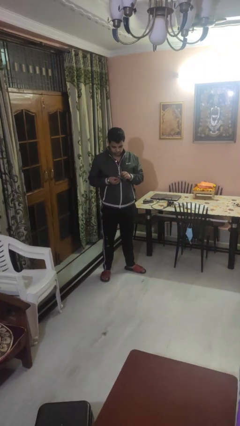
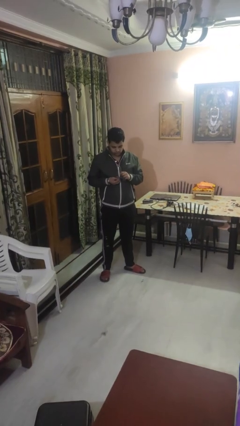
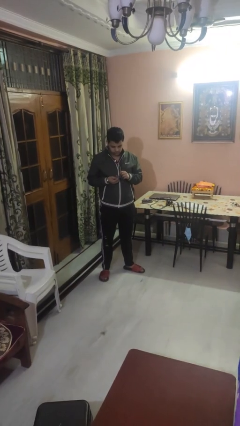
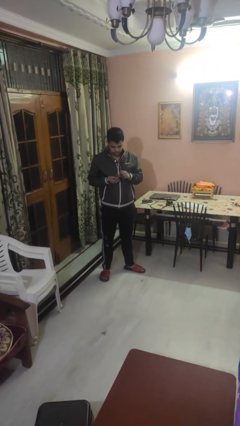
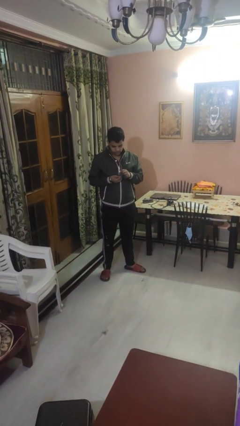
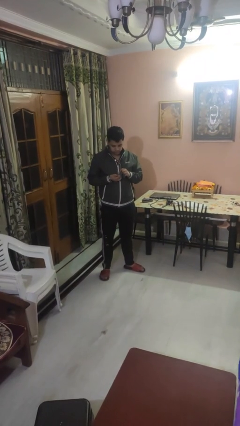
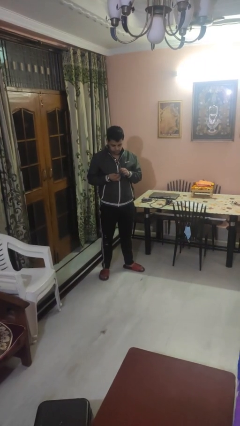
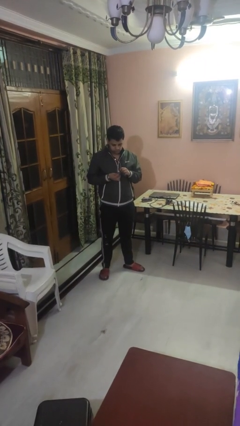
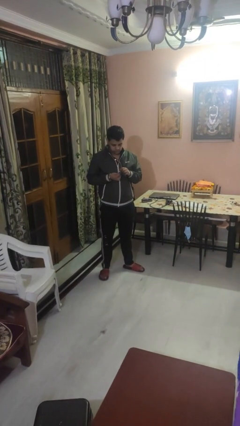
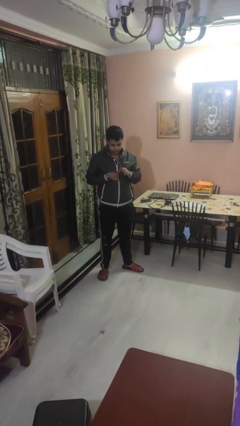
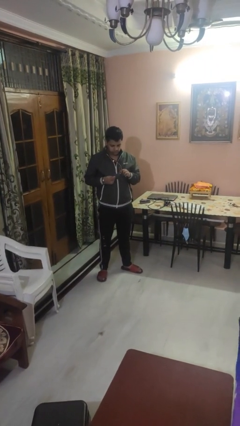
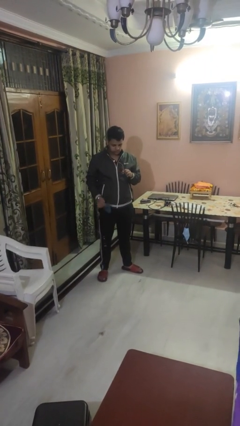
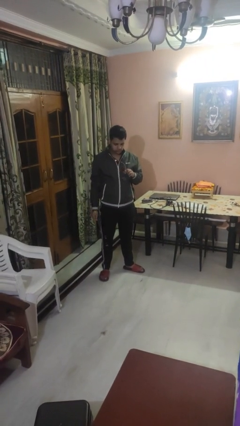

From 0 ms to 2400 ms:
person cleans eyeglasses

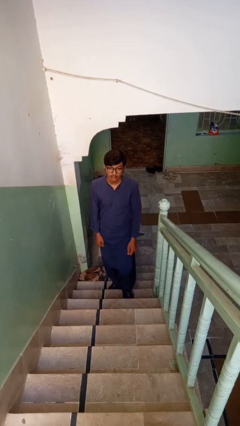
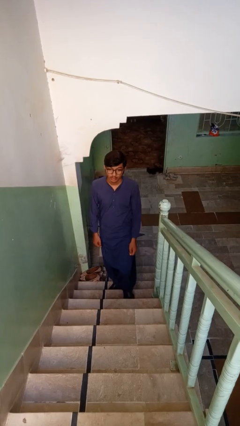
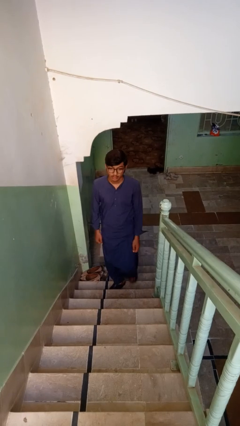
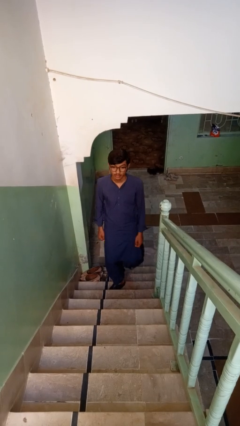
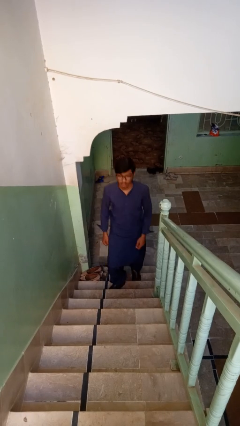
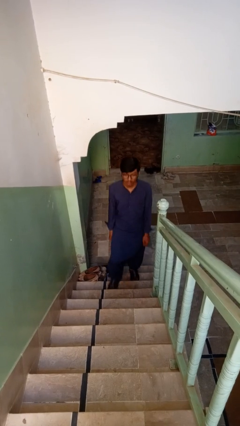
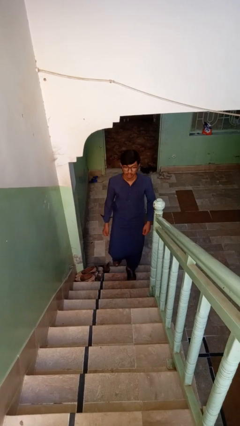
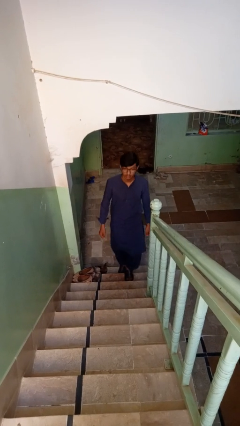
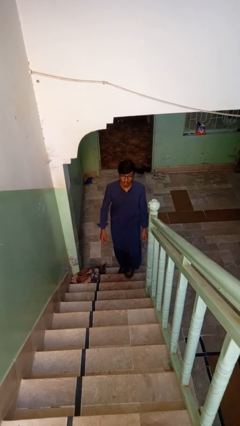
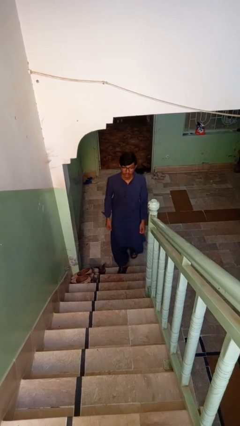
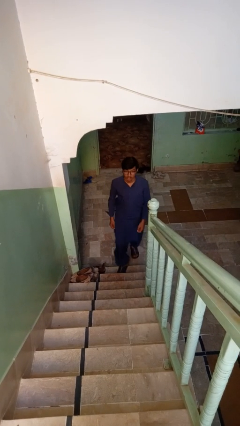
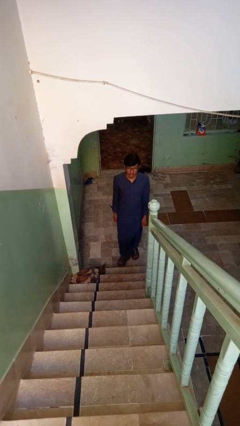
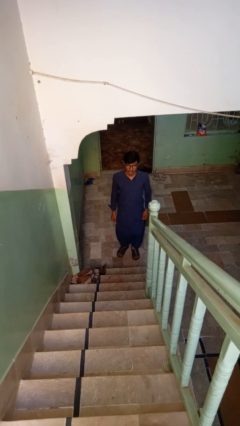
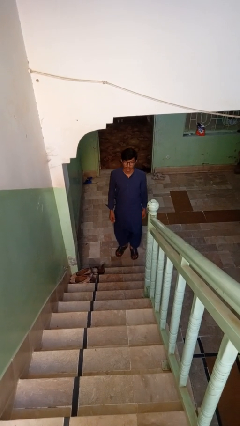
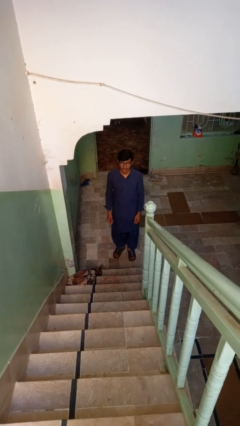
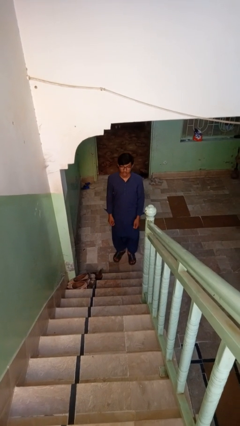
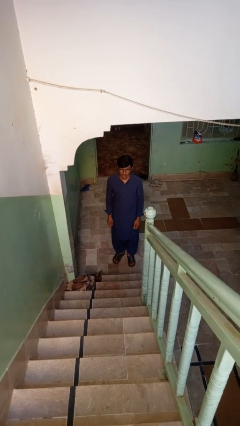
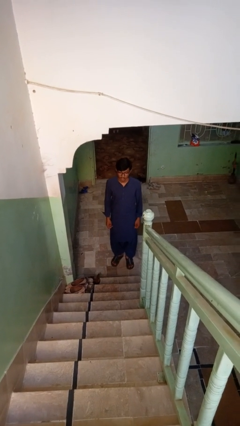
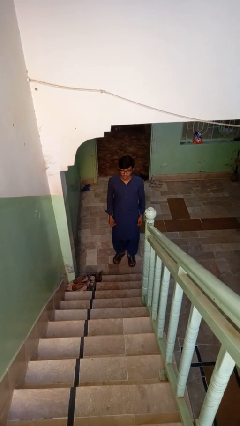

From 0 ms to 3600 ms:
person climbs down stairs

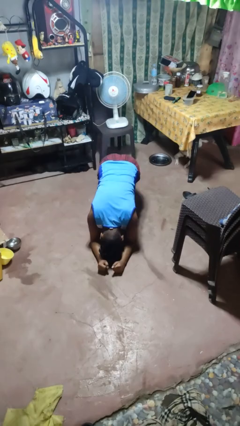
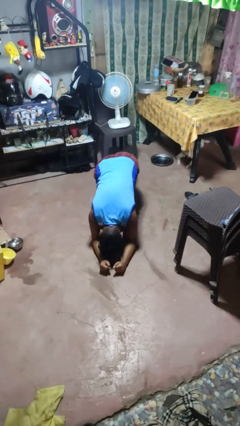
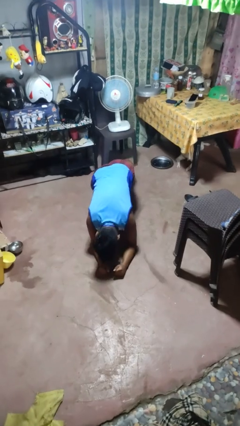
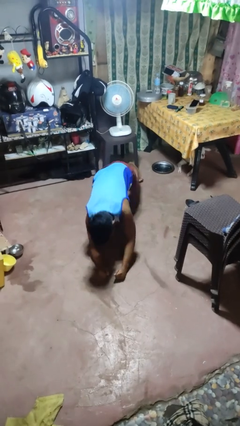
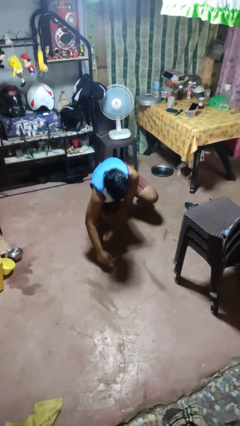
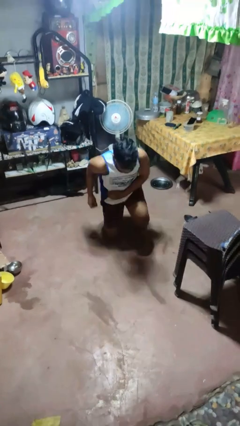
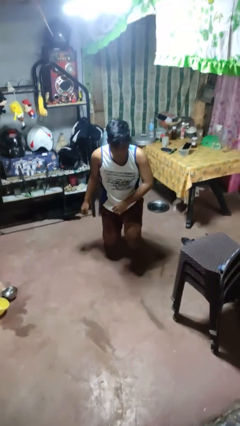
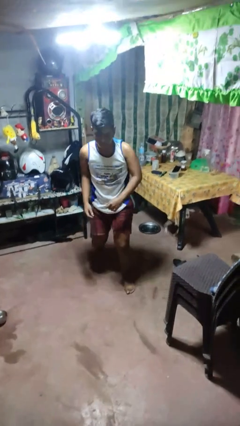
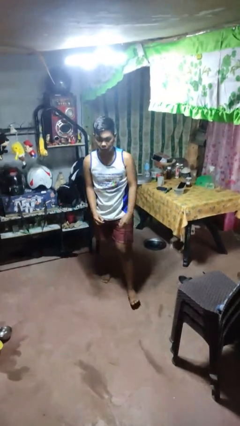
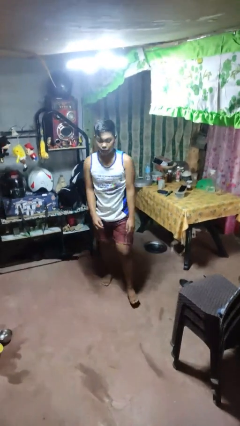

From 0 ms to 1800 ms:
person stands up from floor

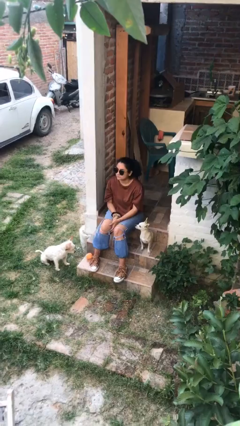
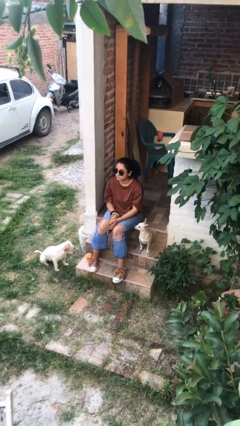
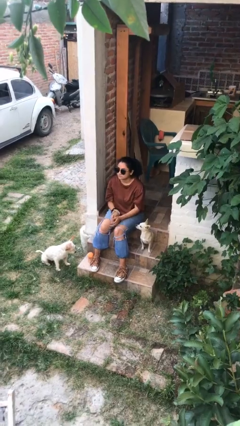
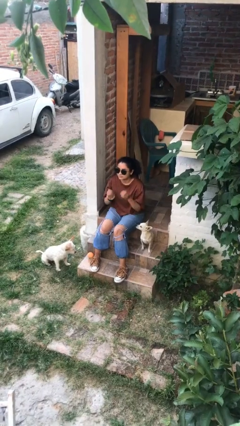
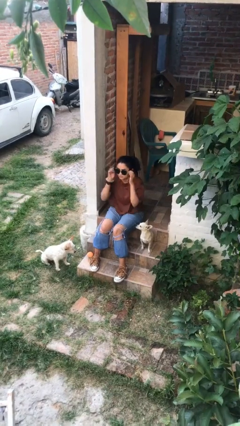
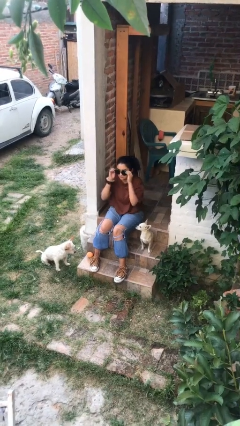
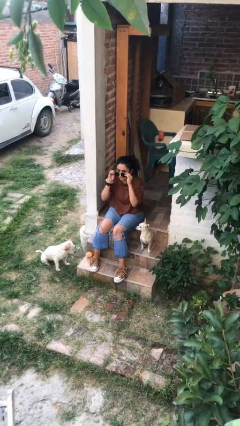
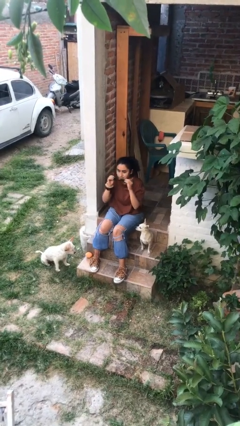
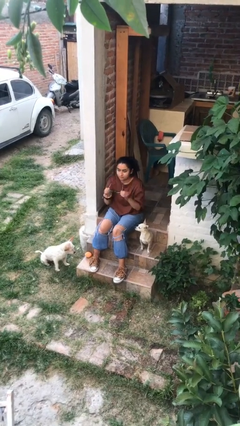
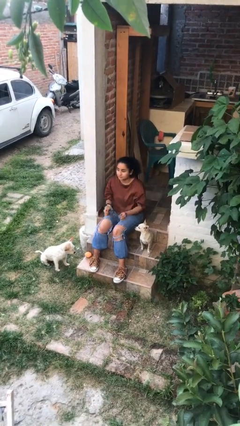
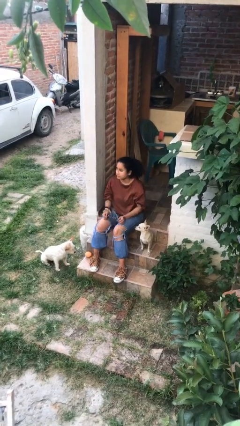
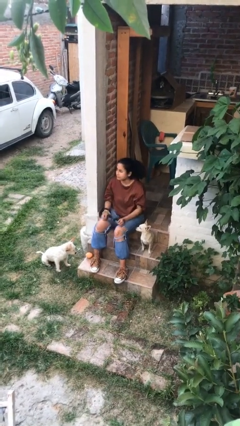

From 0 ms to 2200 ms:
person takes off sunglasses

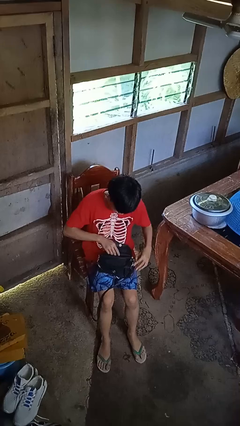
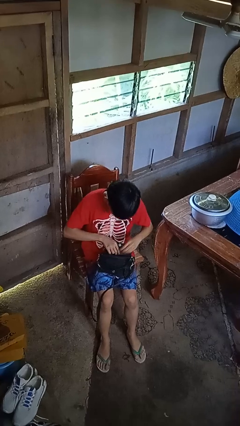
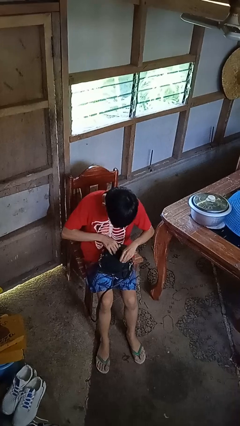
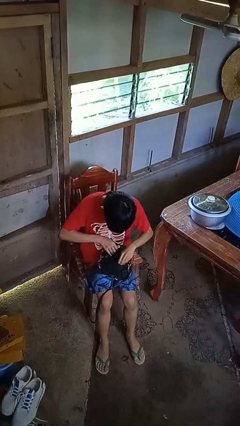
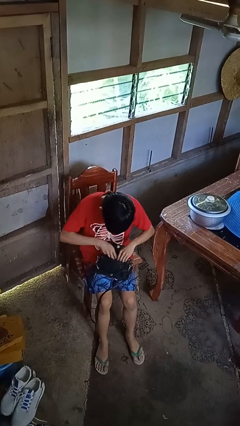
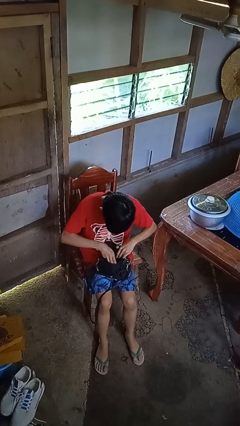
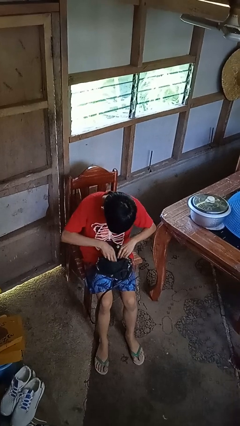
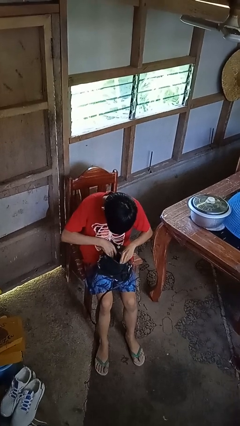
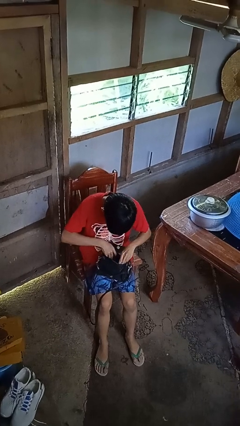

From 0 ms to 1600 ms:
person searches in purse

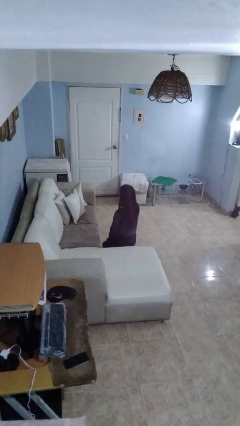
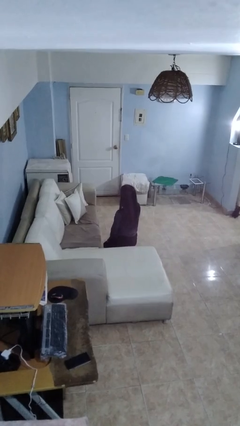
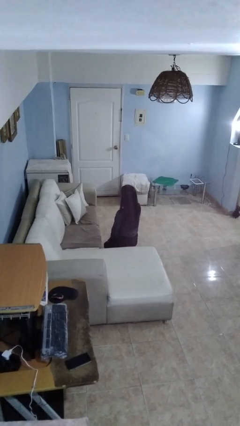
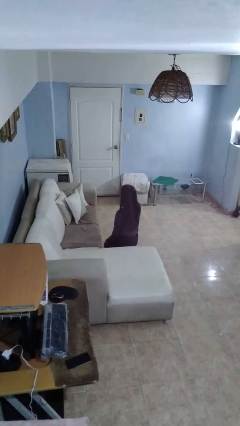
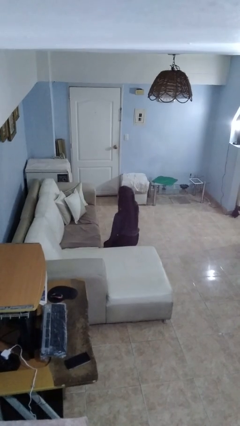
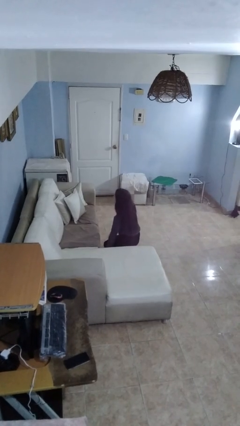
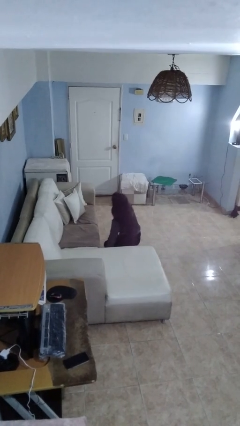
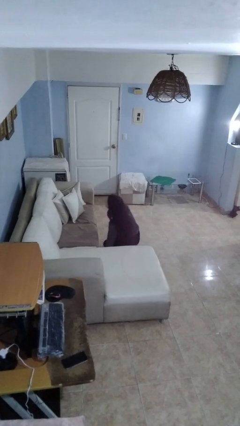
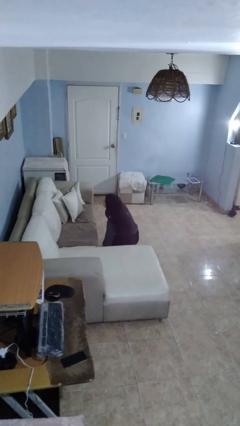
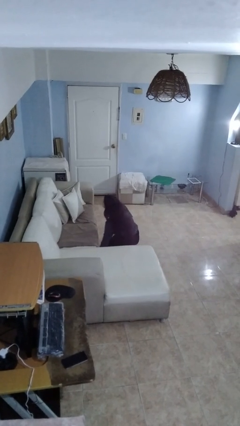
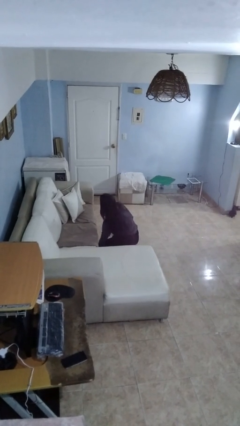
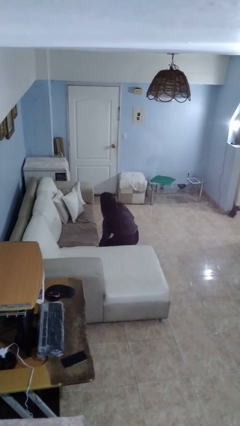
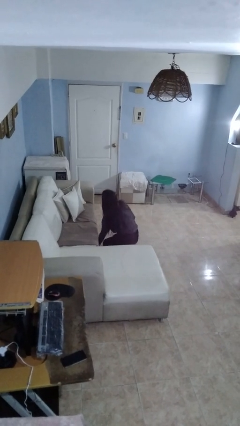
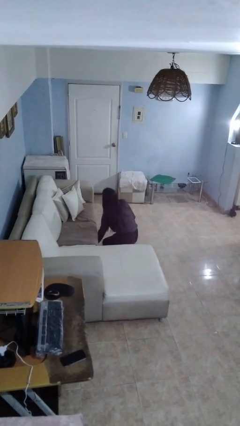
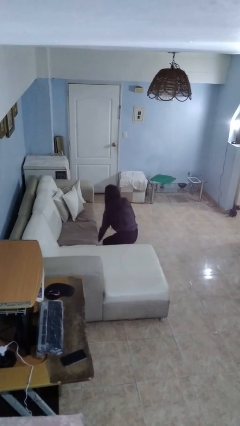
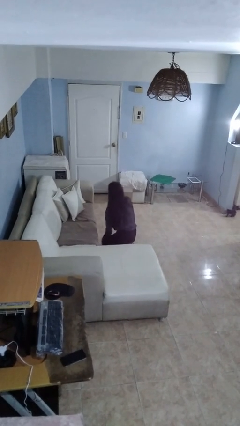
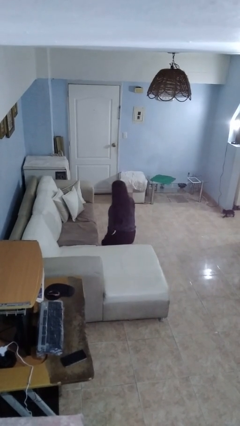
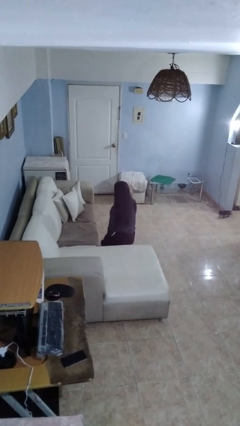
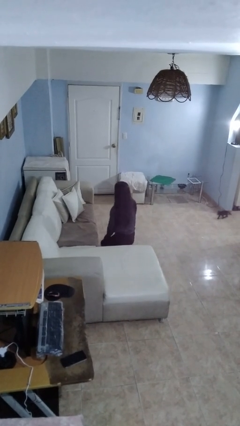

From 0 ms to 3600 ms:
person searches under couch

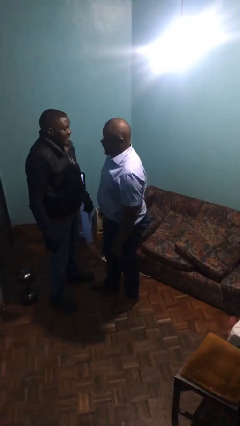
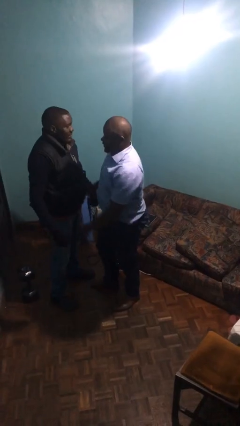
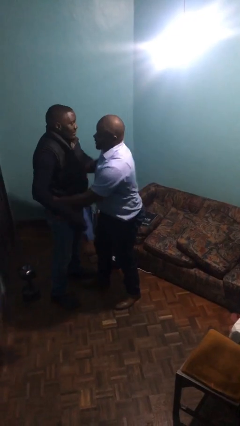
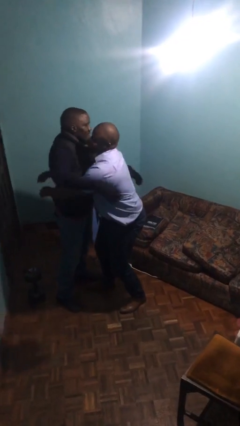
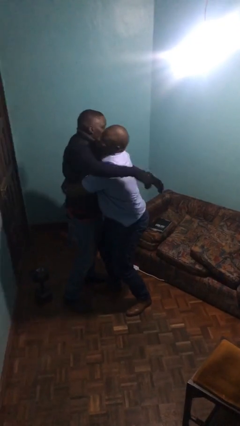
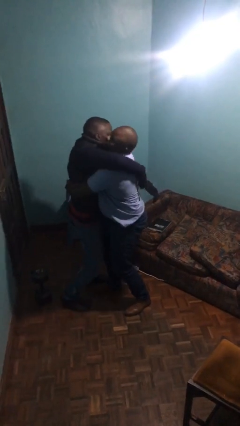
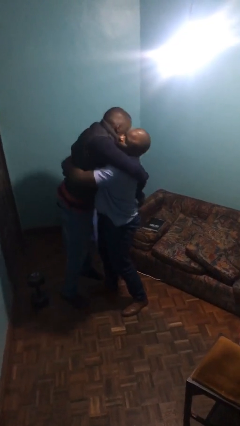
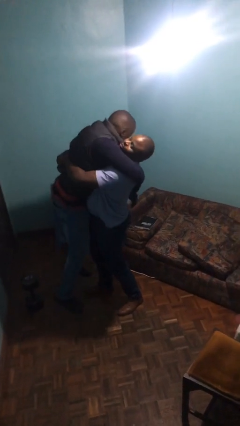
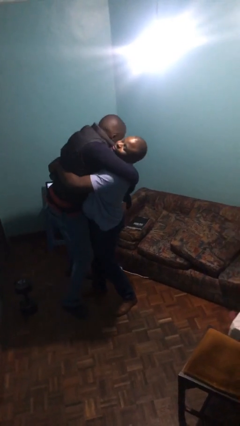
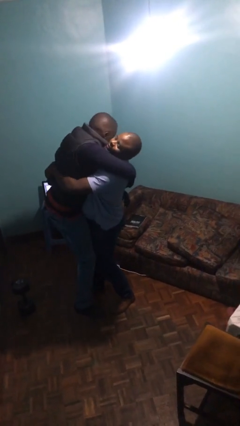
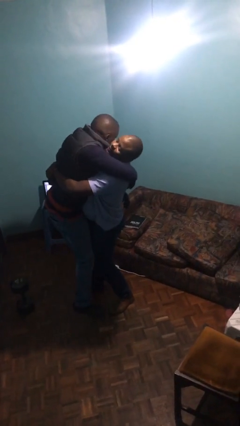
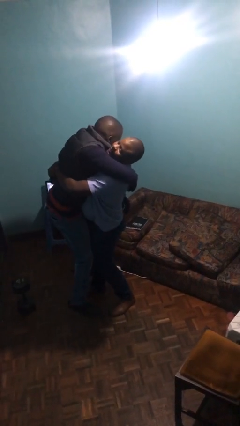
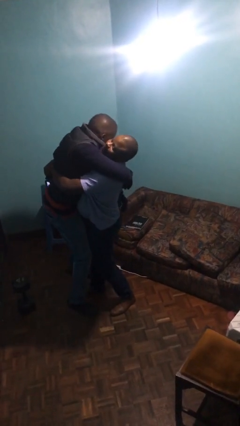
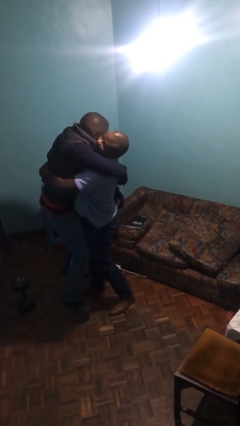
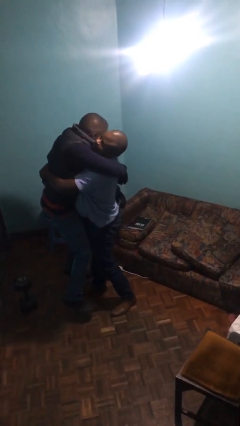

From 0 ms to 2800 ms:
person picks up person
